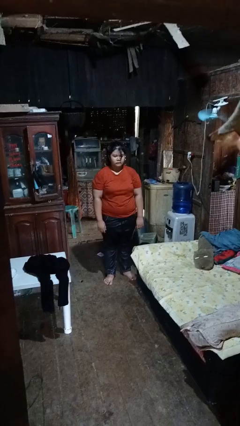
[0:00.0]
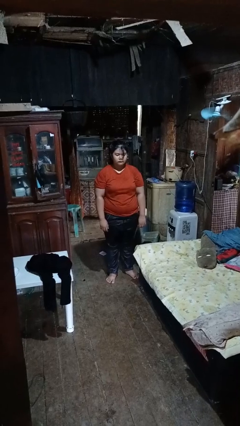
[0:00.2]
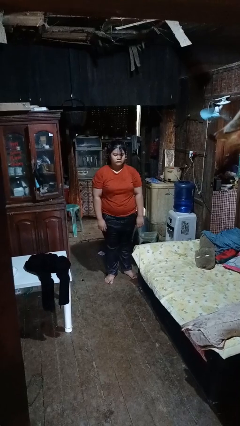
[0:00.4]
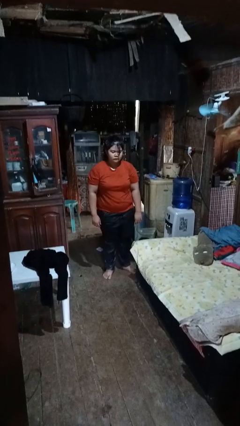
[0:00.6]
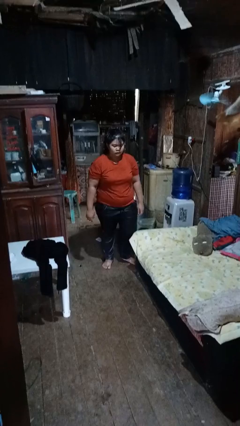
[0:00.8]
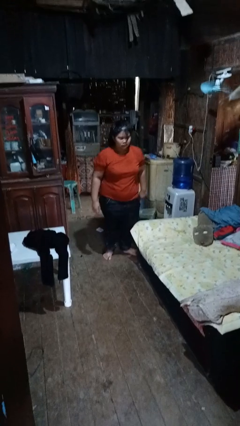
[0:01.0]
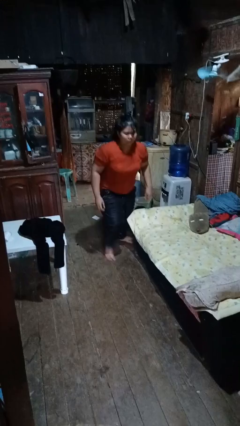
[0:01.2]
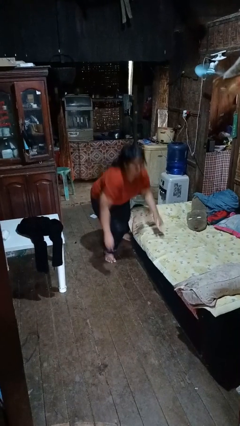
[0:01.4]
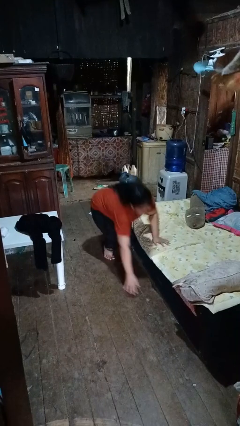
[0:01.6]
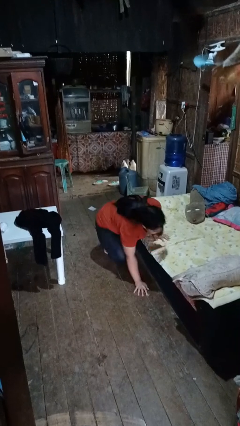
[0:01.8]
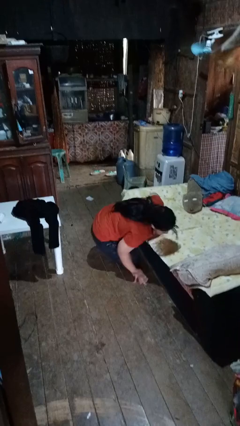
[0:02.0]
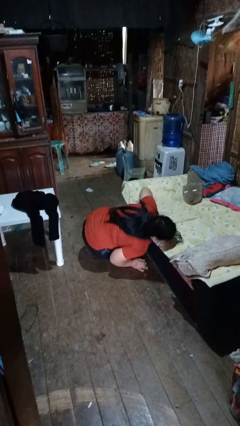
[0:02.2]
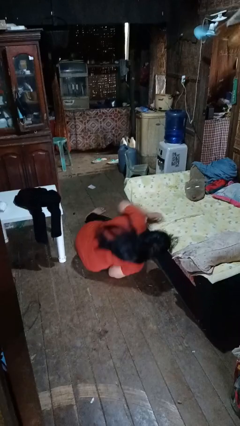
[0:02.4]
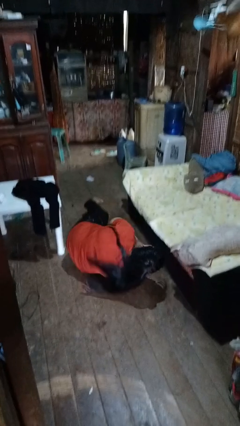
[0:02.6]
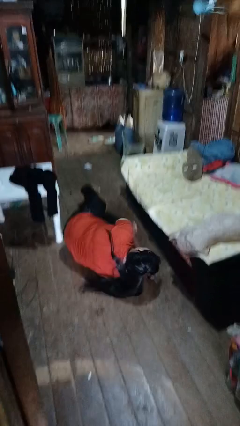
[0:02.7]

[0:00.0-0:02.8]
person trips on object on floor

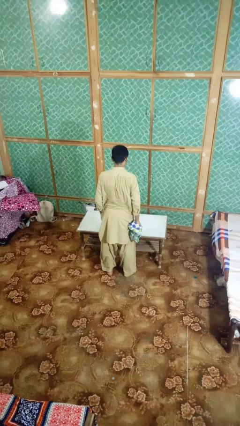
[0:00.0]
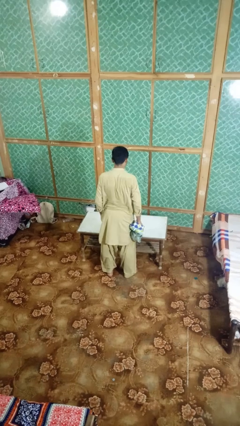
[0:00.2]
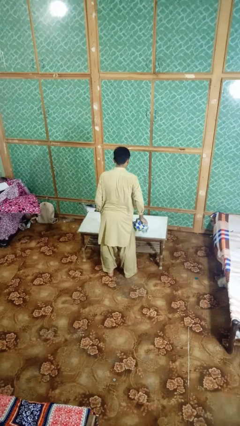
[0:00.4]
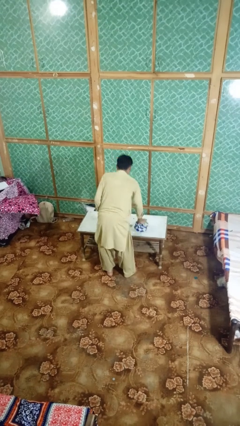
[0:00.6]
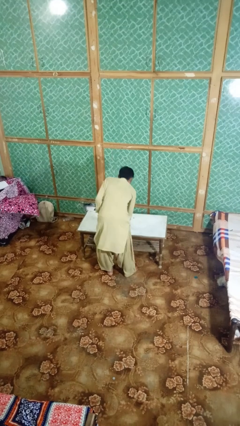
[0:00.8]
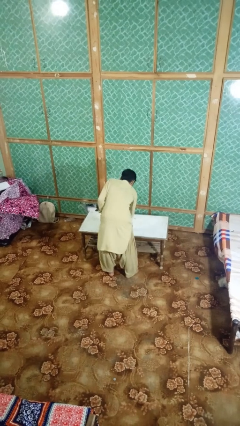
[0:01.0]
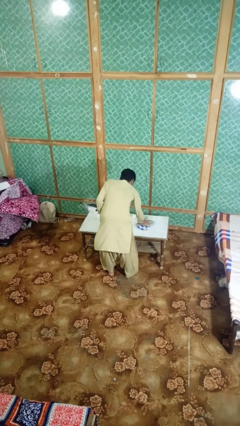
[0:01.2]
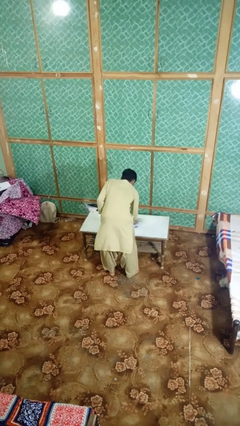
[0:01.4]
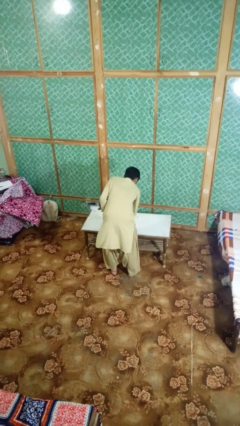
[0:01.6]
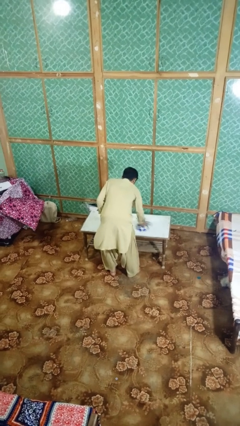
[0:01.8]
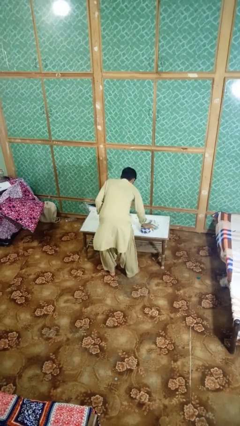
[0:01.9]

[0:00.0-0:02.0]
person cleans table with rag

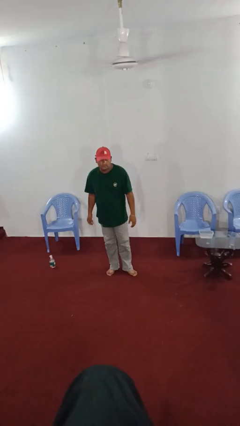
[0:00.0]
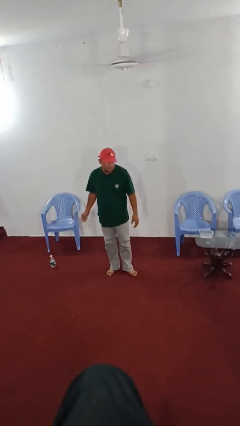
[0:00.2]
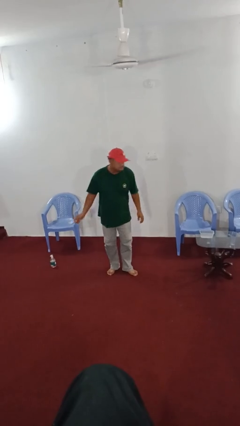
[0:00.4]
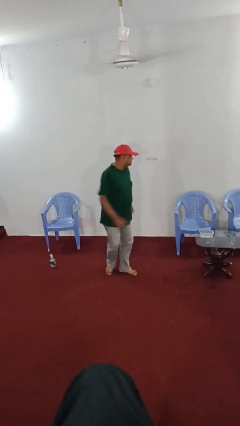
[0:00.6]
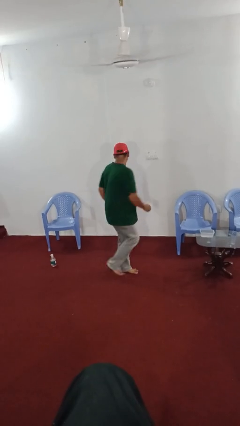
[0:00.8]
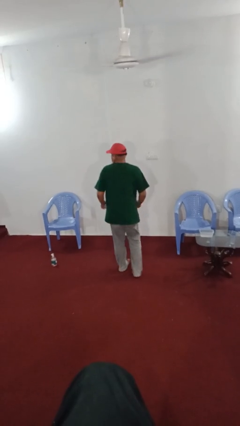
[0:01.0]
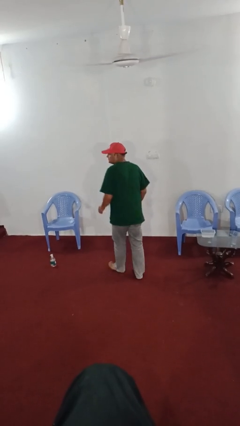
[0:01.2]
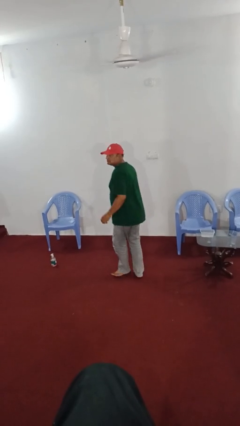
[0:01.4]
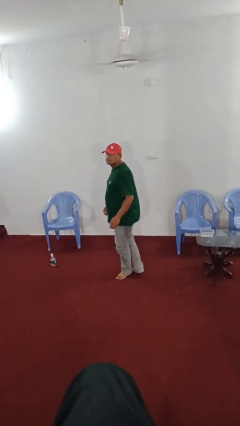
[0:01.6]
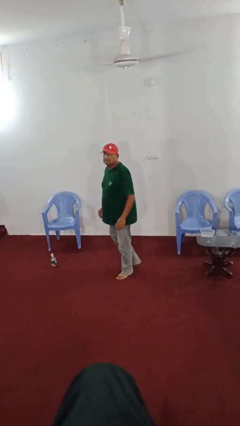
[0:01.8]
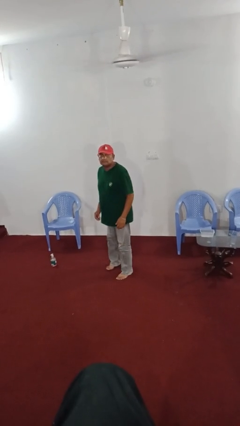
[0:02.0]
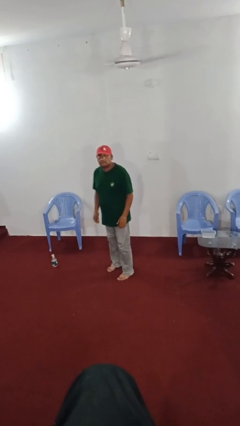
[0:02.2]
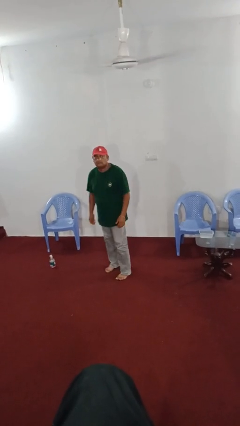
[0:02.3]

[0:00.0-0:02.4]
person twirls

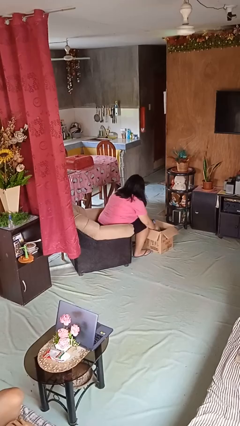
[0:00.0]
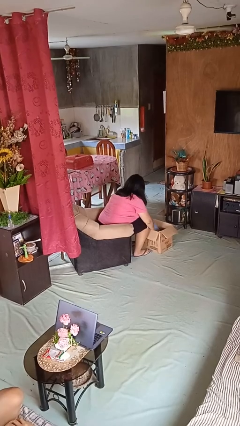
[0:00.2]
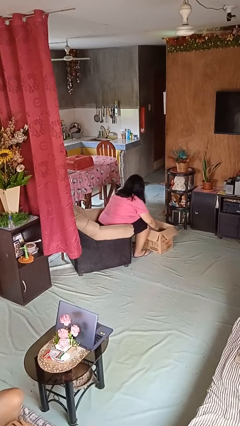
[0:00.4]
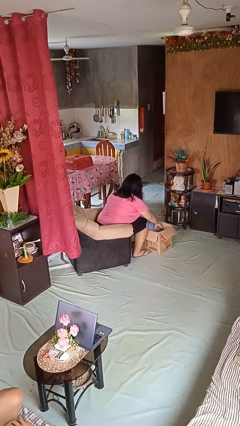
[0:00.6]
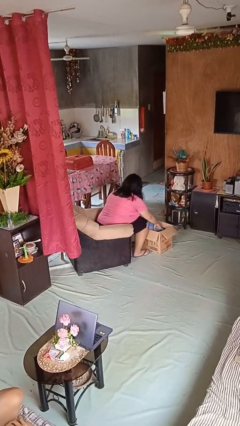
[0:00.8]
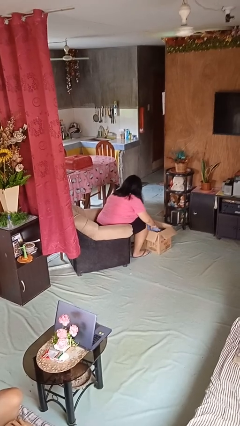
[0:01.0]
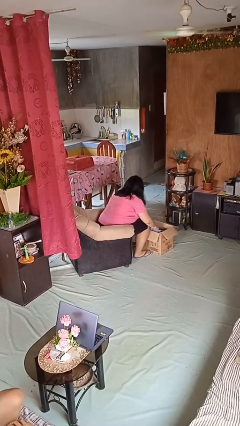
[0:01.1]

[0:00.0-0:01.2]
person searches in box

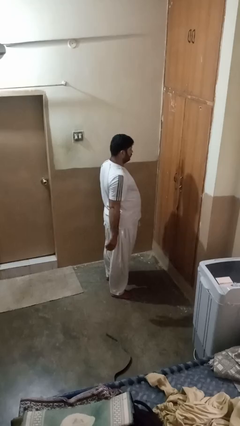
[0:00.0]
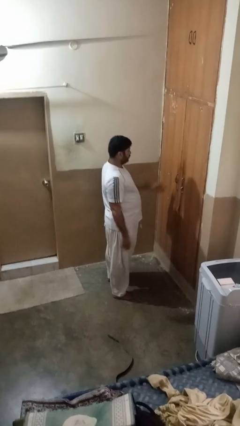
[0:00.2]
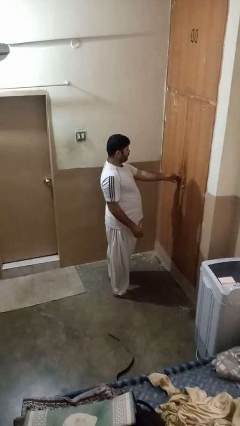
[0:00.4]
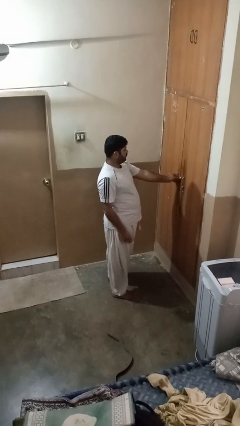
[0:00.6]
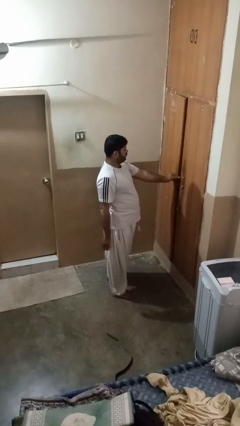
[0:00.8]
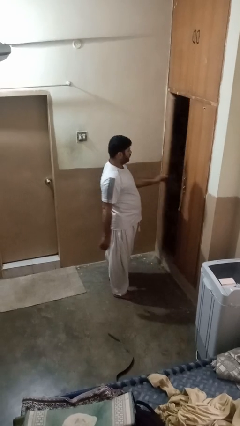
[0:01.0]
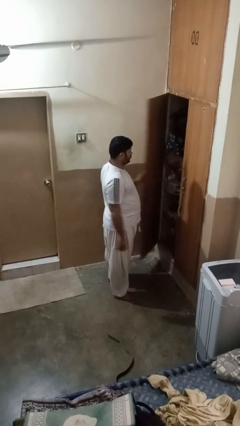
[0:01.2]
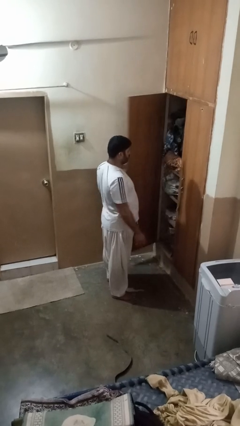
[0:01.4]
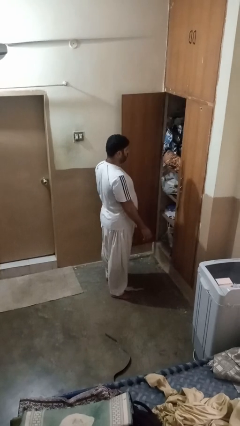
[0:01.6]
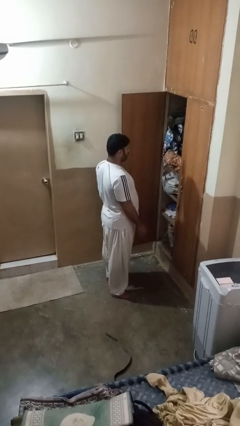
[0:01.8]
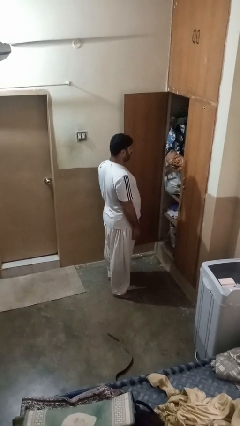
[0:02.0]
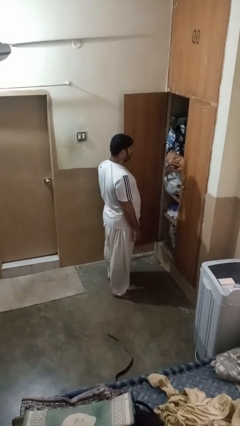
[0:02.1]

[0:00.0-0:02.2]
person opens closet door

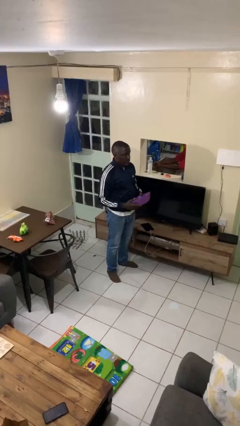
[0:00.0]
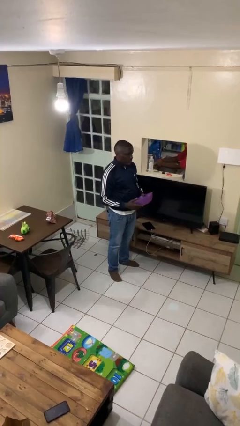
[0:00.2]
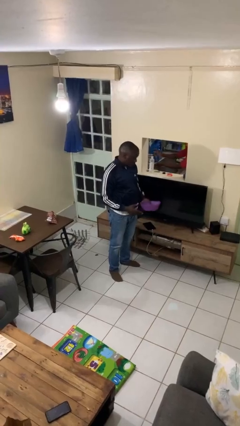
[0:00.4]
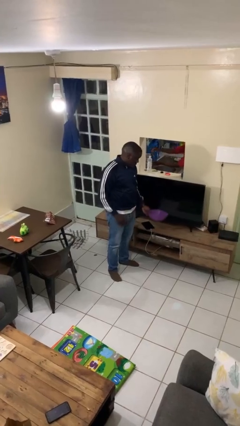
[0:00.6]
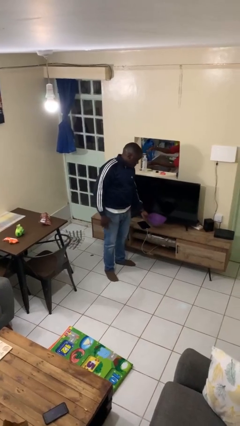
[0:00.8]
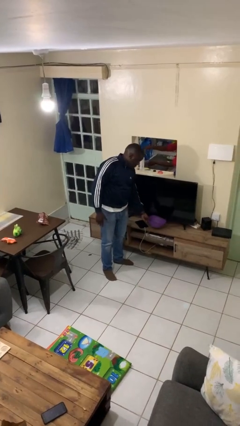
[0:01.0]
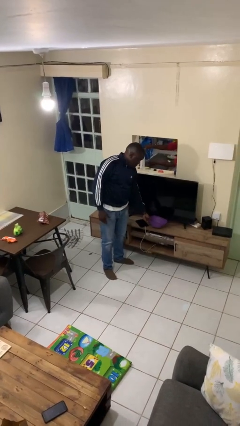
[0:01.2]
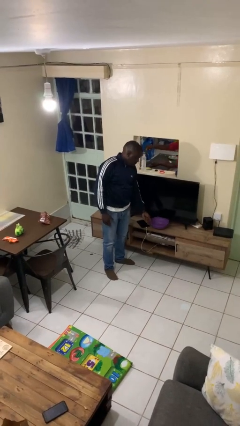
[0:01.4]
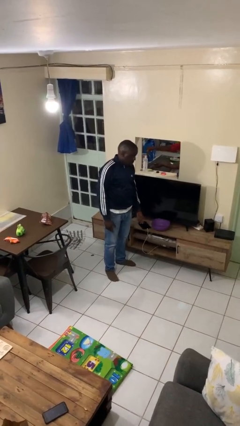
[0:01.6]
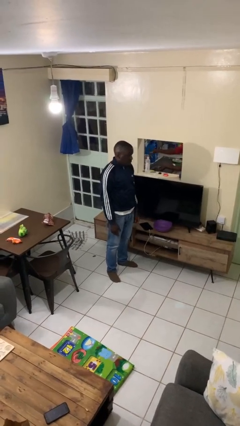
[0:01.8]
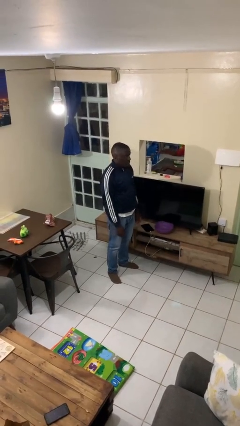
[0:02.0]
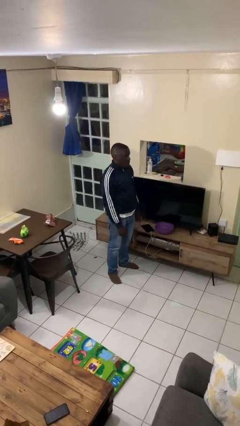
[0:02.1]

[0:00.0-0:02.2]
person puts down object on countertop

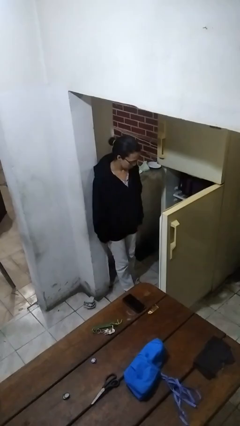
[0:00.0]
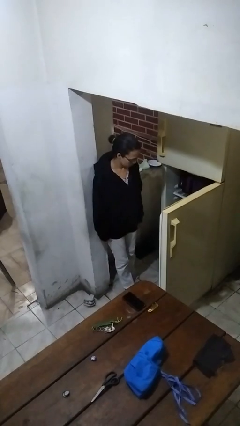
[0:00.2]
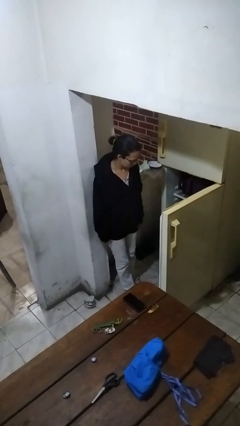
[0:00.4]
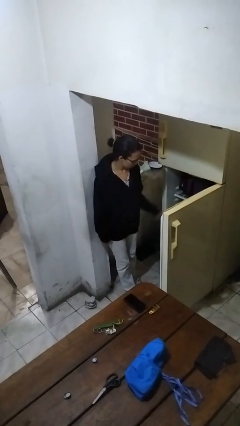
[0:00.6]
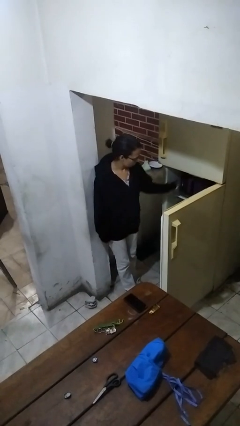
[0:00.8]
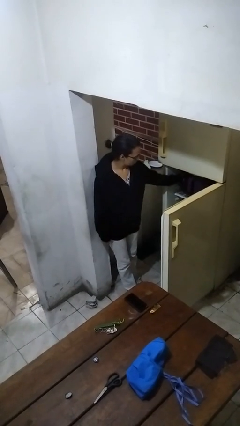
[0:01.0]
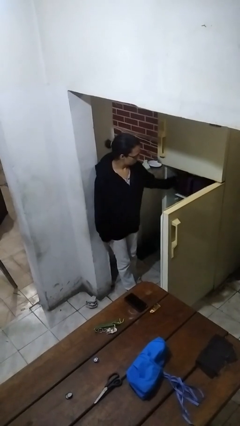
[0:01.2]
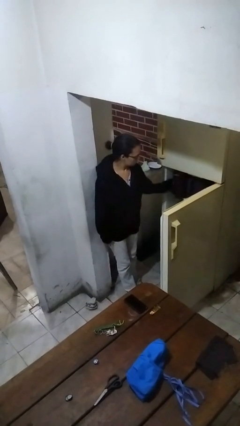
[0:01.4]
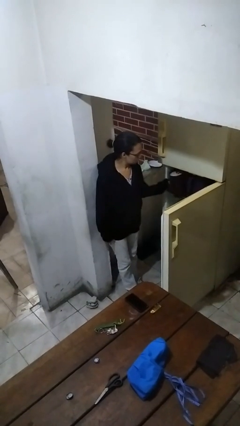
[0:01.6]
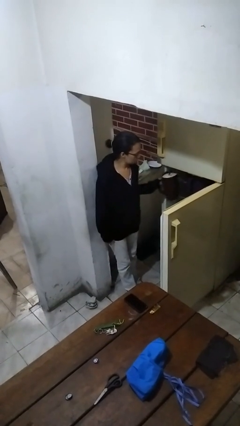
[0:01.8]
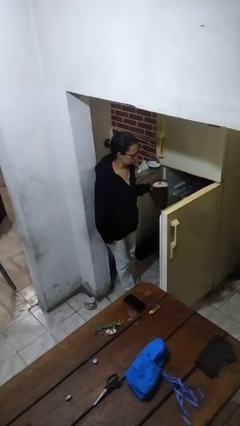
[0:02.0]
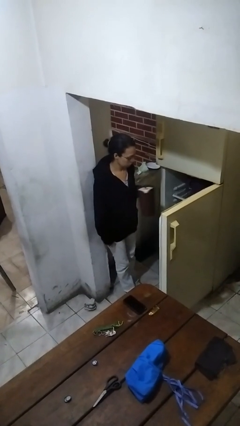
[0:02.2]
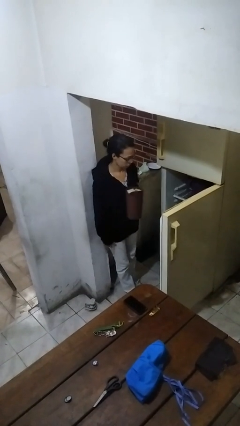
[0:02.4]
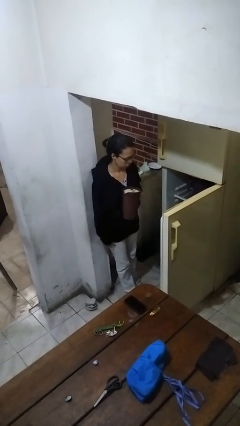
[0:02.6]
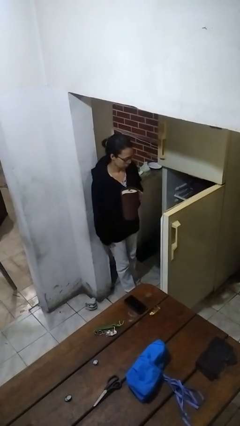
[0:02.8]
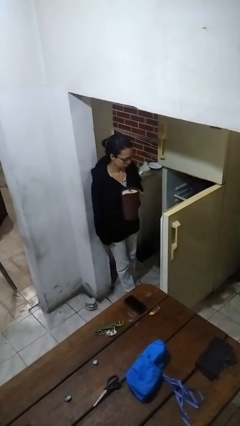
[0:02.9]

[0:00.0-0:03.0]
person takes object from refrigerator

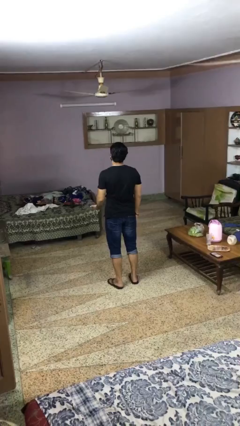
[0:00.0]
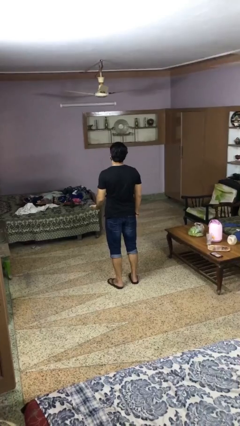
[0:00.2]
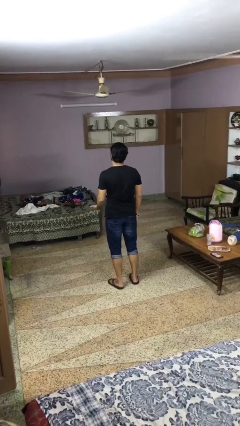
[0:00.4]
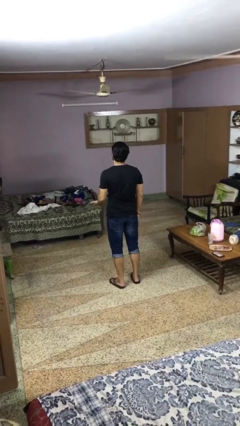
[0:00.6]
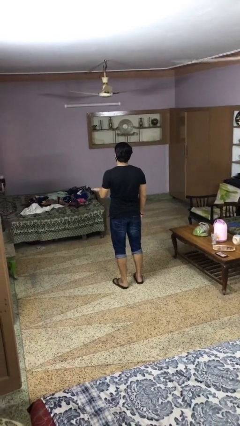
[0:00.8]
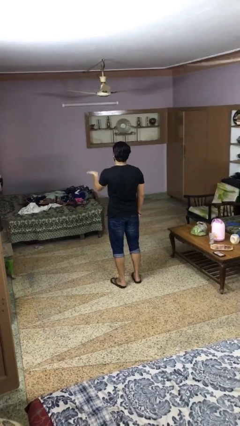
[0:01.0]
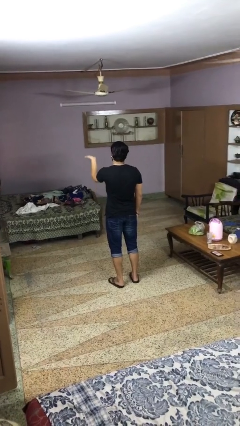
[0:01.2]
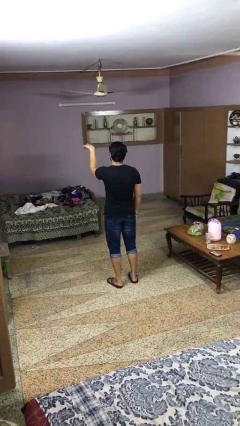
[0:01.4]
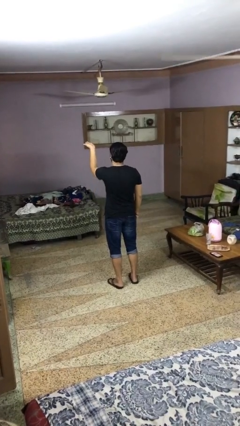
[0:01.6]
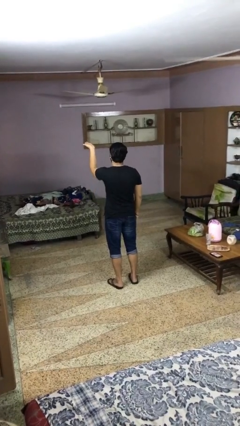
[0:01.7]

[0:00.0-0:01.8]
person gestures swipe up
